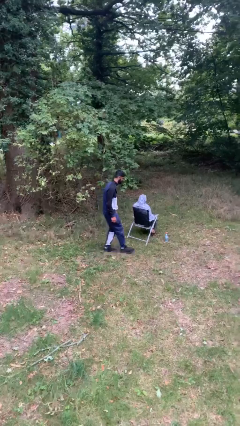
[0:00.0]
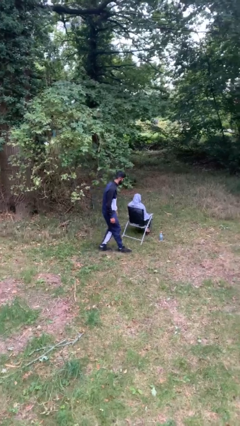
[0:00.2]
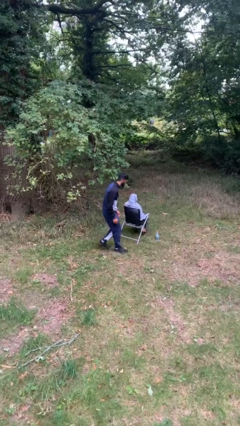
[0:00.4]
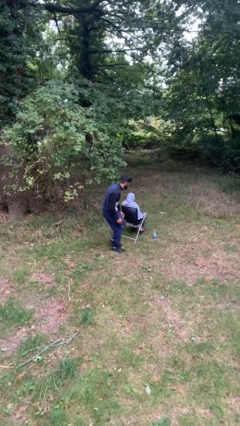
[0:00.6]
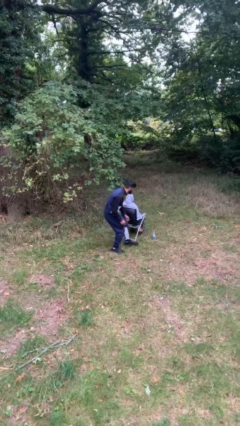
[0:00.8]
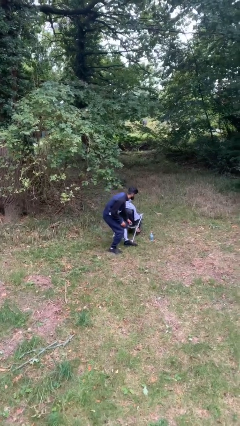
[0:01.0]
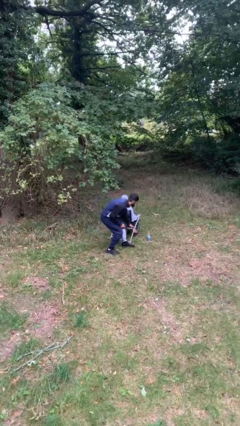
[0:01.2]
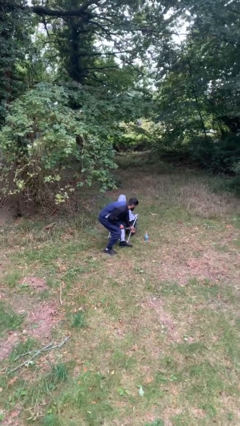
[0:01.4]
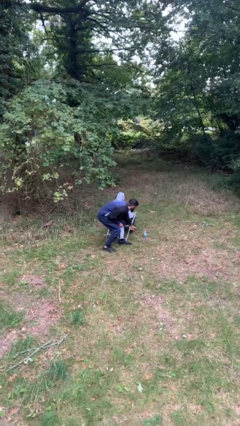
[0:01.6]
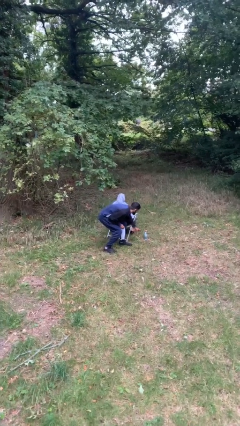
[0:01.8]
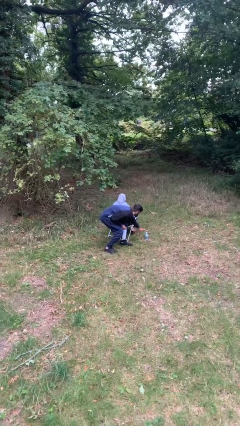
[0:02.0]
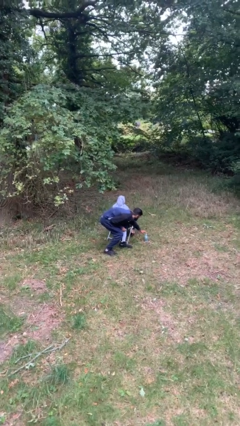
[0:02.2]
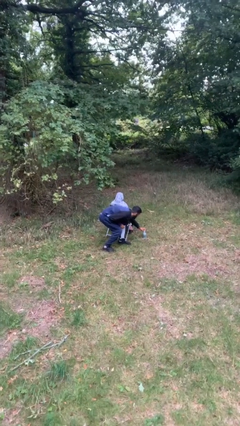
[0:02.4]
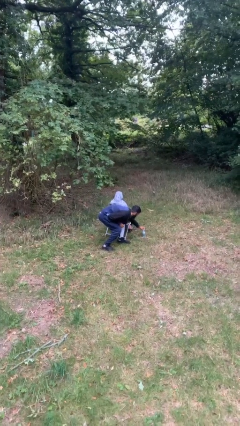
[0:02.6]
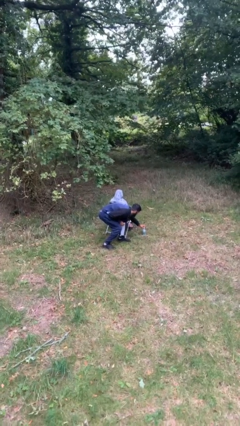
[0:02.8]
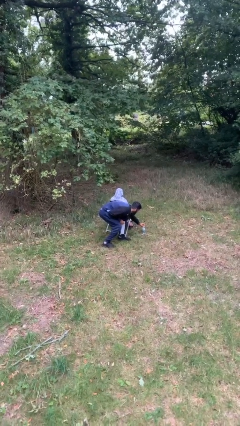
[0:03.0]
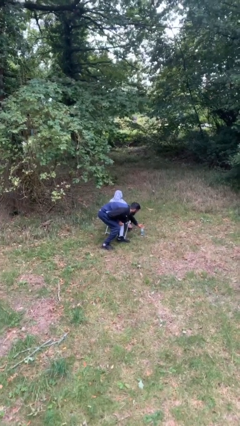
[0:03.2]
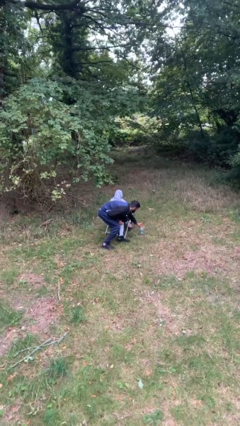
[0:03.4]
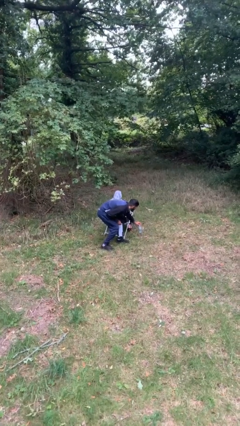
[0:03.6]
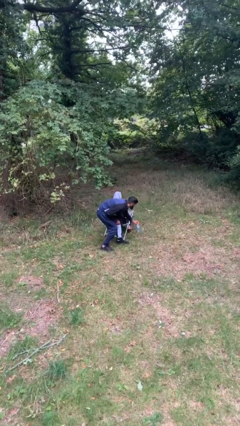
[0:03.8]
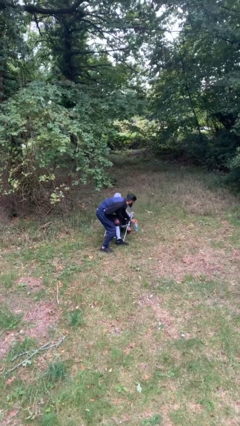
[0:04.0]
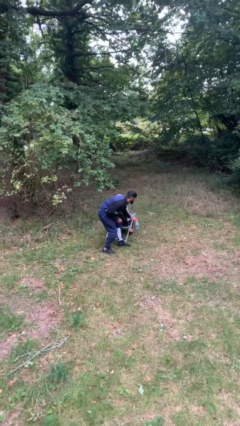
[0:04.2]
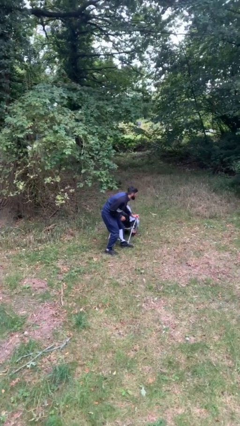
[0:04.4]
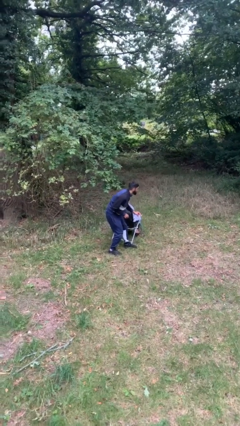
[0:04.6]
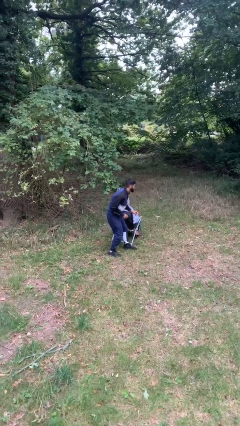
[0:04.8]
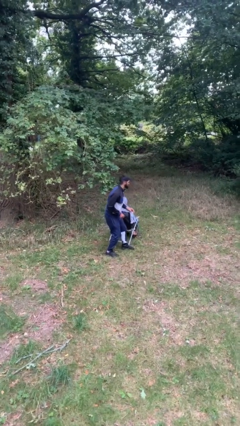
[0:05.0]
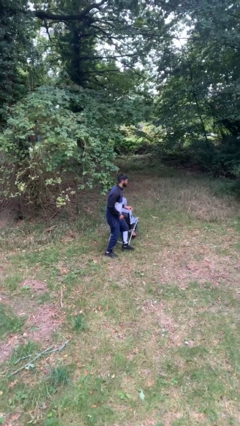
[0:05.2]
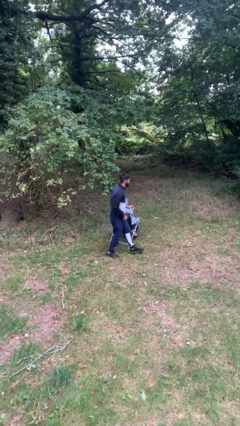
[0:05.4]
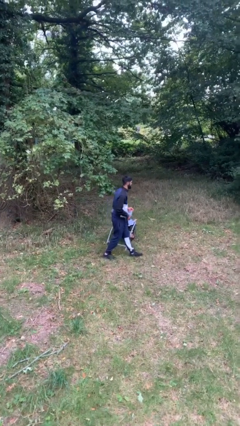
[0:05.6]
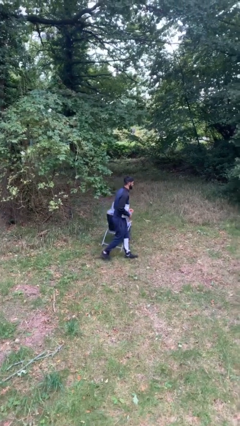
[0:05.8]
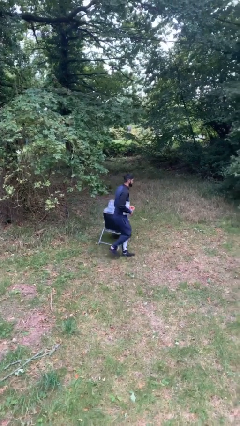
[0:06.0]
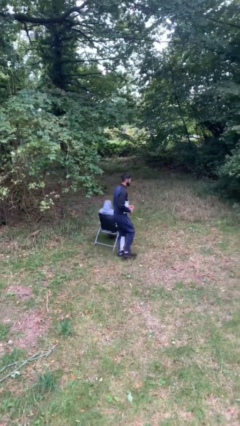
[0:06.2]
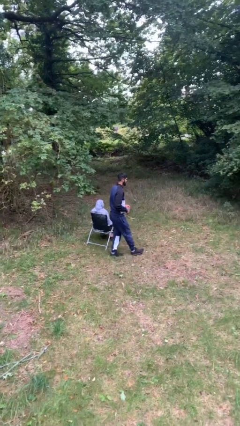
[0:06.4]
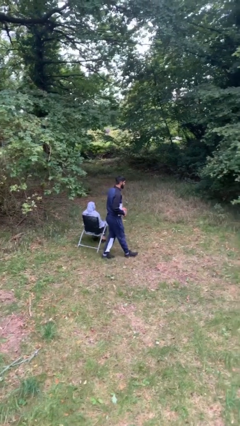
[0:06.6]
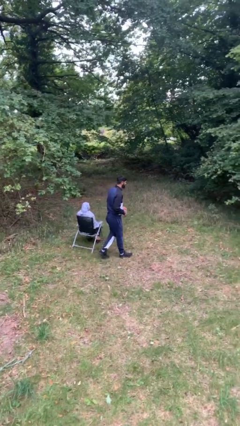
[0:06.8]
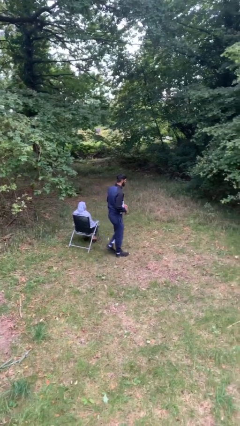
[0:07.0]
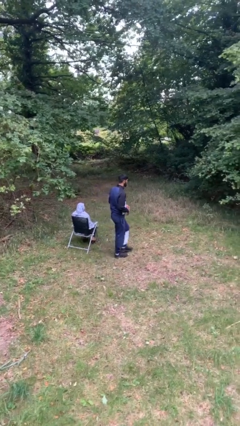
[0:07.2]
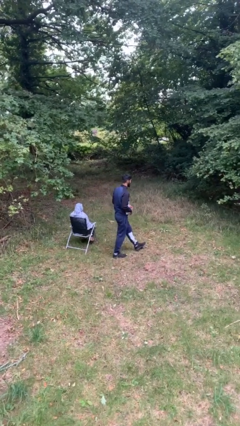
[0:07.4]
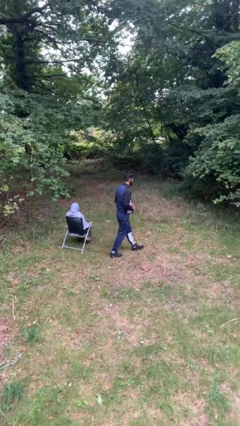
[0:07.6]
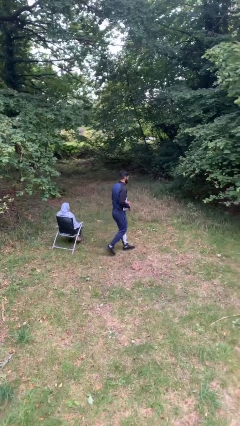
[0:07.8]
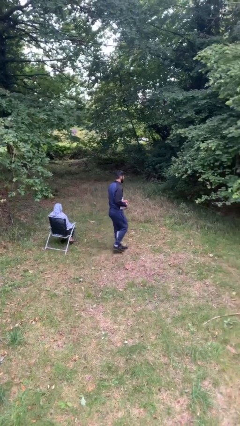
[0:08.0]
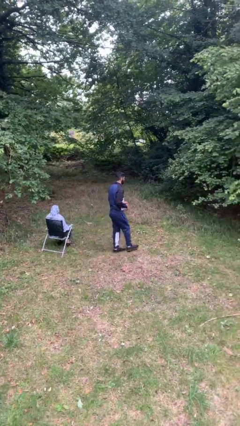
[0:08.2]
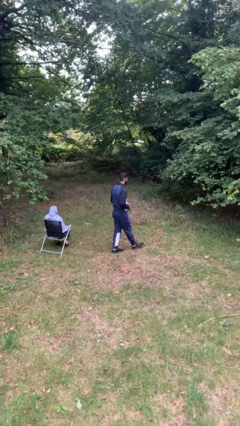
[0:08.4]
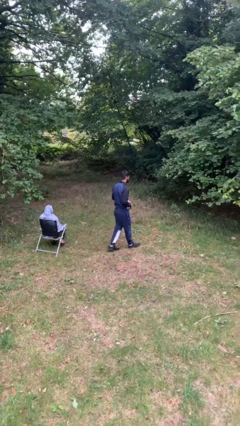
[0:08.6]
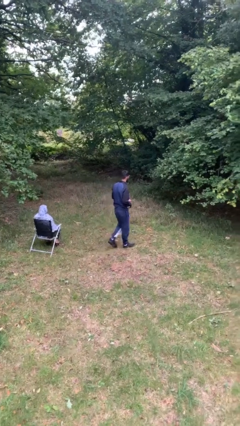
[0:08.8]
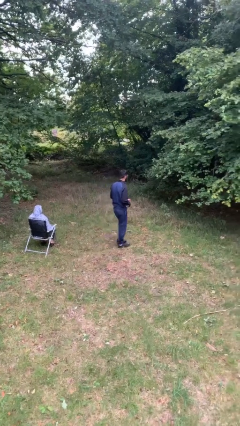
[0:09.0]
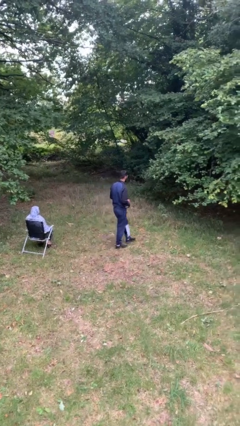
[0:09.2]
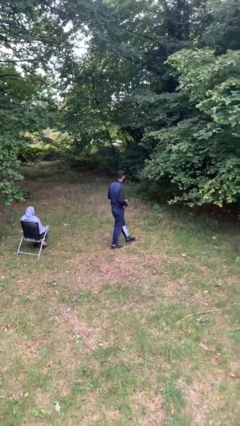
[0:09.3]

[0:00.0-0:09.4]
person steals object from person

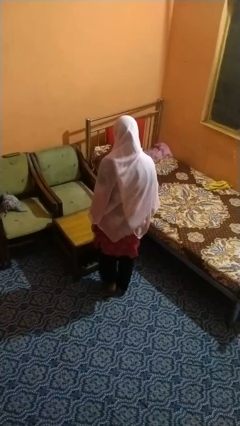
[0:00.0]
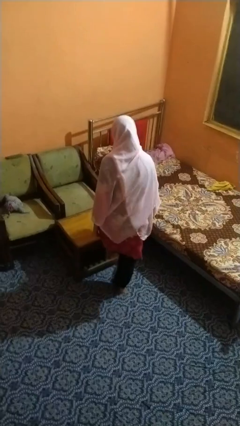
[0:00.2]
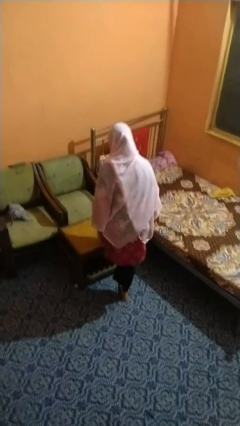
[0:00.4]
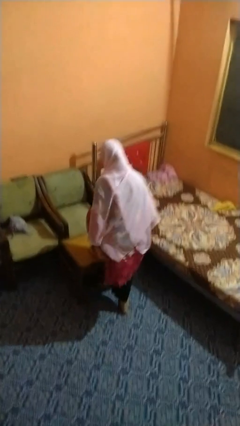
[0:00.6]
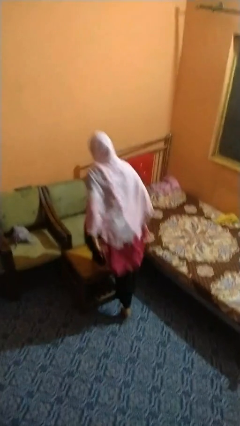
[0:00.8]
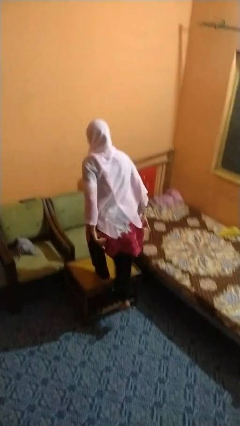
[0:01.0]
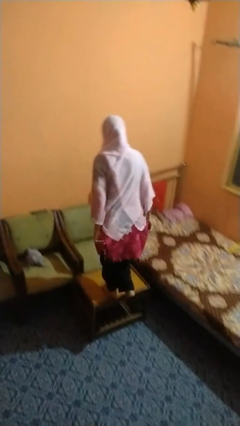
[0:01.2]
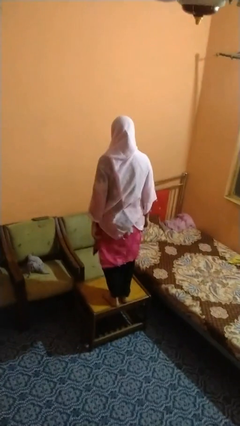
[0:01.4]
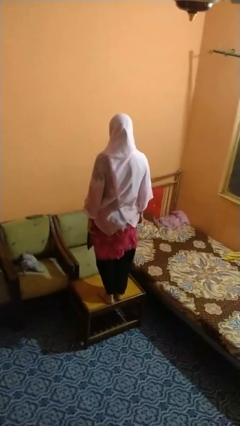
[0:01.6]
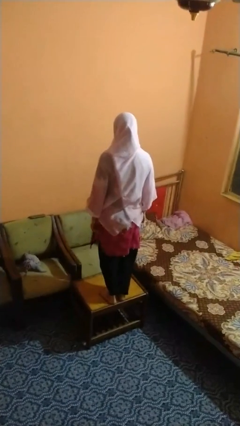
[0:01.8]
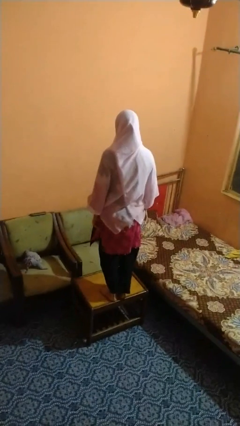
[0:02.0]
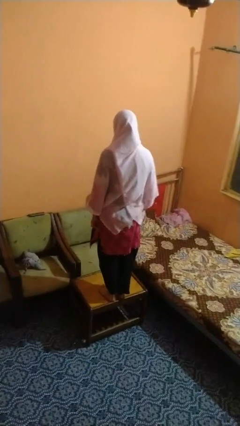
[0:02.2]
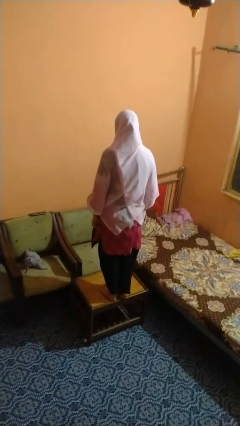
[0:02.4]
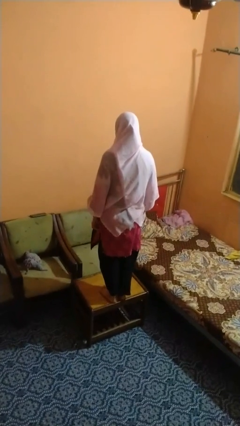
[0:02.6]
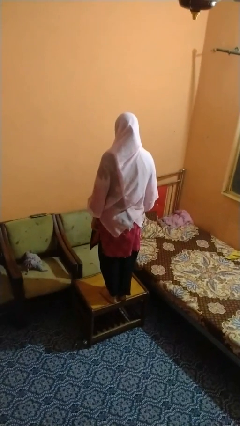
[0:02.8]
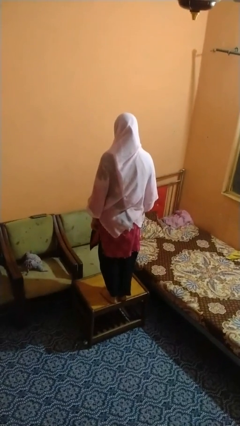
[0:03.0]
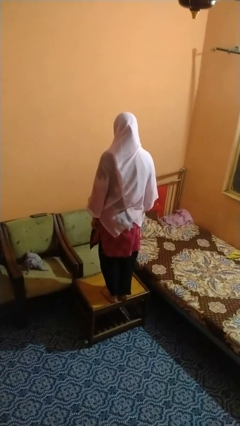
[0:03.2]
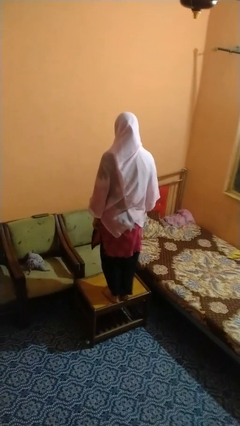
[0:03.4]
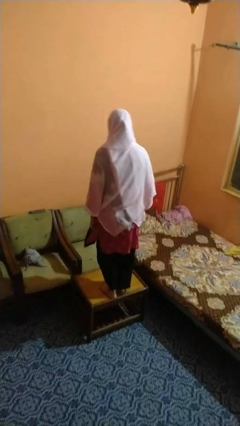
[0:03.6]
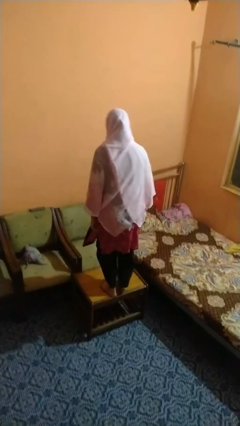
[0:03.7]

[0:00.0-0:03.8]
person climbs on table

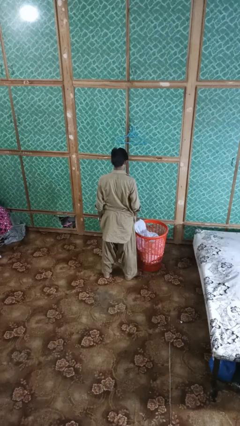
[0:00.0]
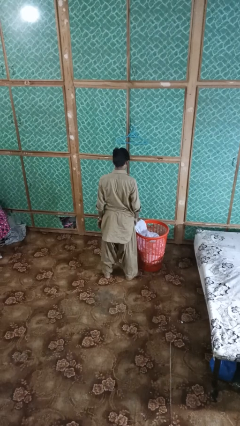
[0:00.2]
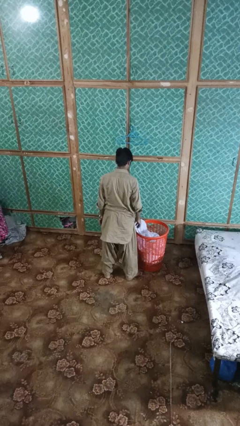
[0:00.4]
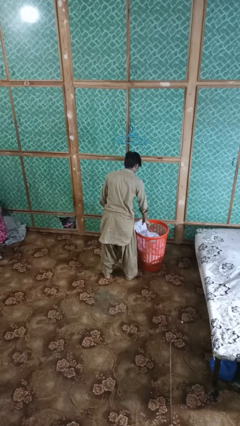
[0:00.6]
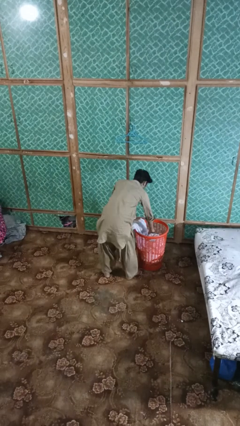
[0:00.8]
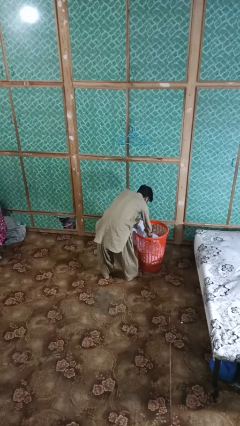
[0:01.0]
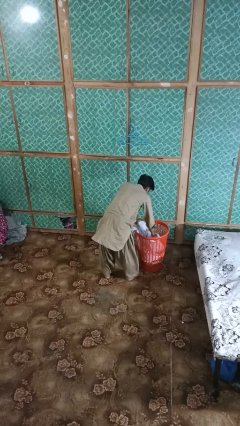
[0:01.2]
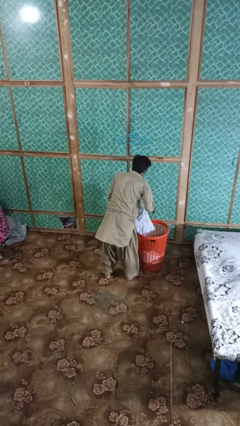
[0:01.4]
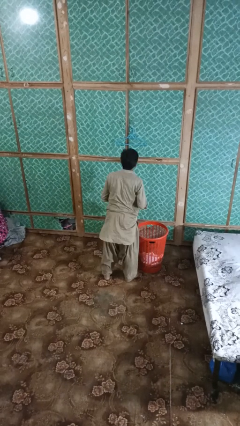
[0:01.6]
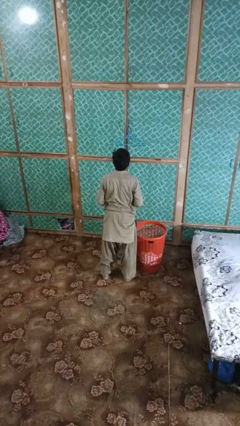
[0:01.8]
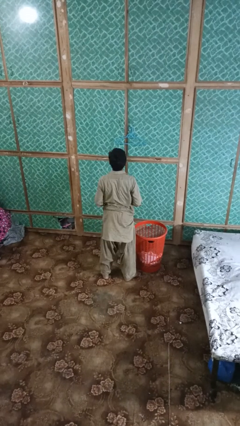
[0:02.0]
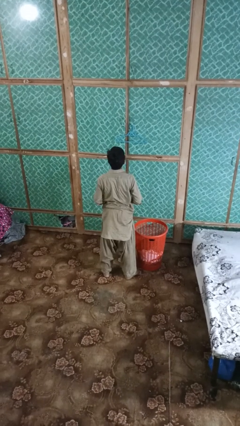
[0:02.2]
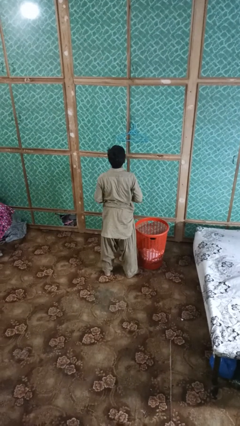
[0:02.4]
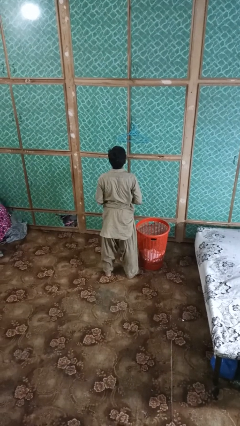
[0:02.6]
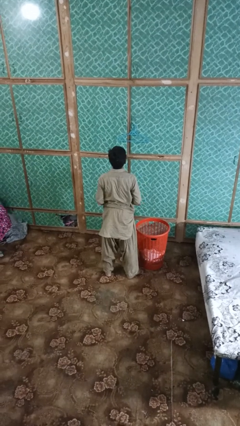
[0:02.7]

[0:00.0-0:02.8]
person takes object from basket

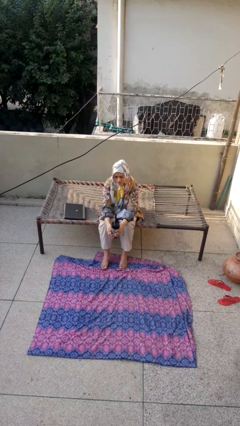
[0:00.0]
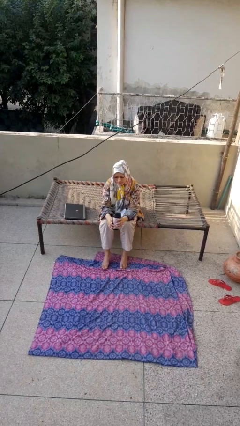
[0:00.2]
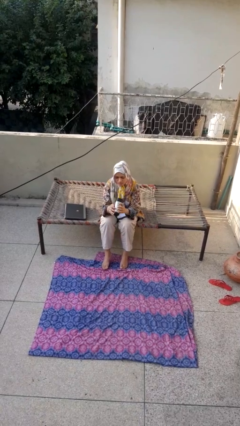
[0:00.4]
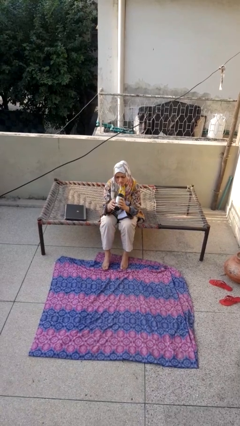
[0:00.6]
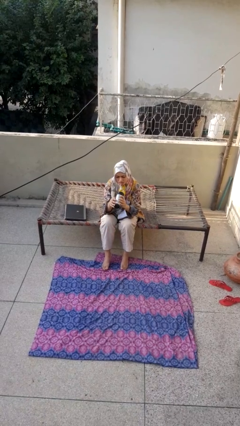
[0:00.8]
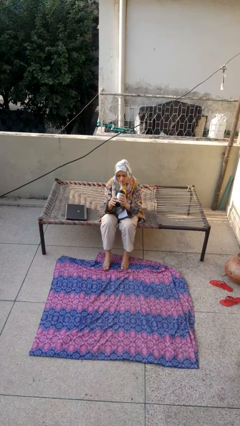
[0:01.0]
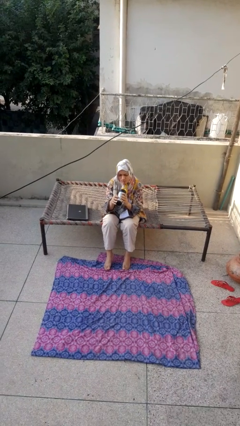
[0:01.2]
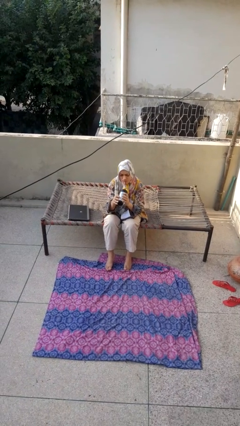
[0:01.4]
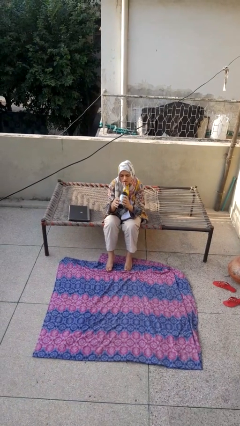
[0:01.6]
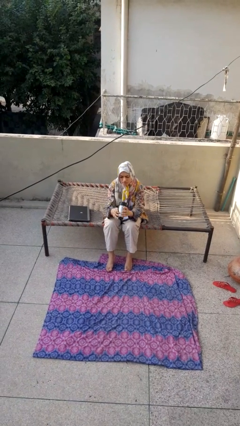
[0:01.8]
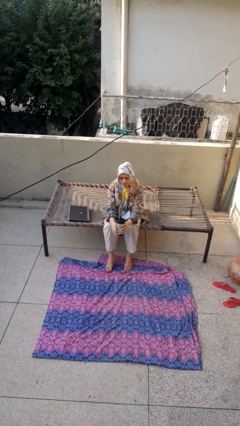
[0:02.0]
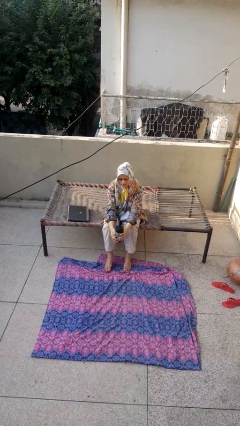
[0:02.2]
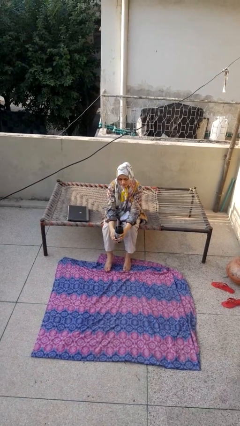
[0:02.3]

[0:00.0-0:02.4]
person drinks from straw
